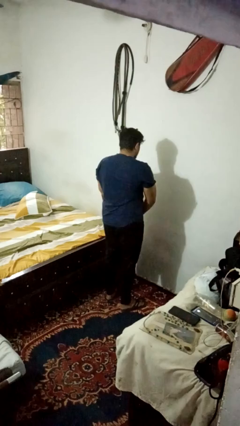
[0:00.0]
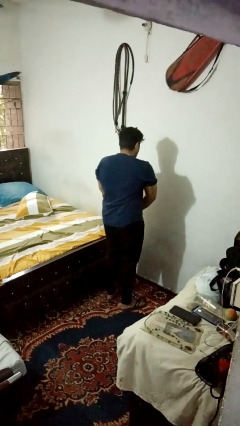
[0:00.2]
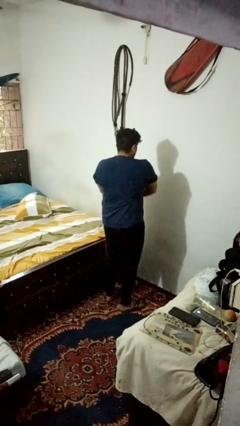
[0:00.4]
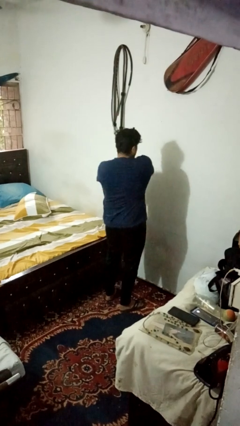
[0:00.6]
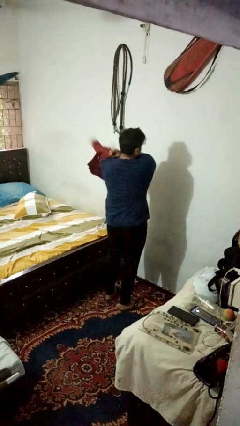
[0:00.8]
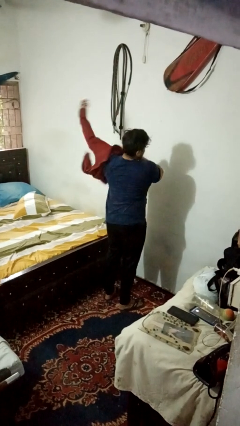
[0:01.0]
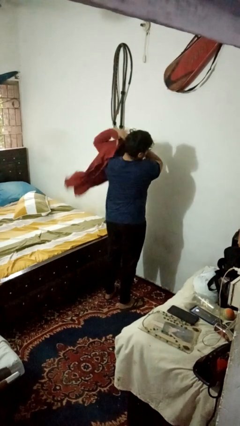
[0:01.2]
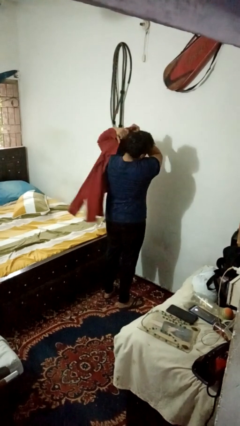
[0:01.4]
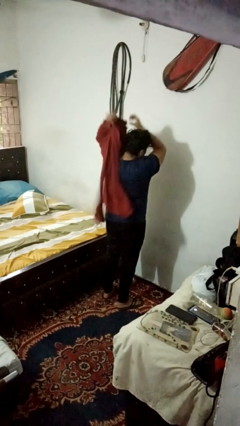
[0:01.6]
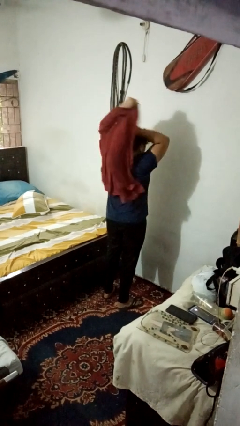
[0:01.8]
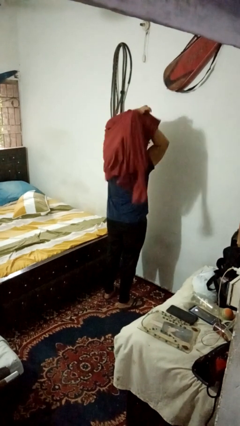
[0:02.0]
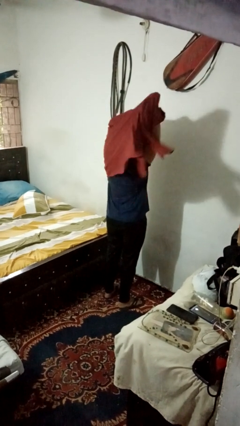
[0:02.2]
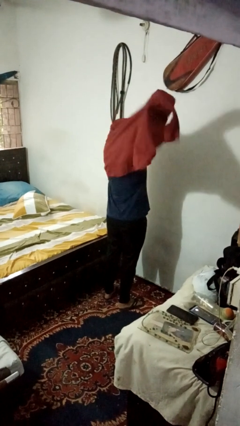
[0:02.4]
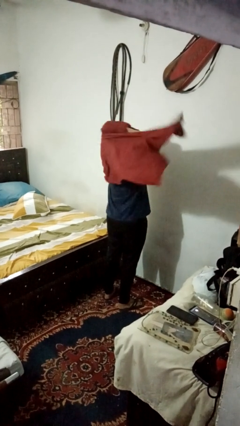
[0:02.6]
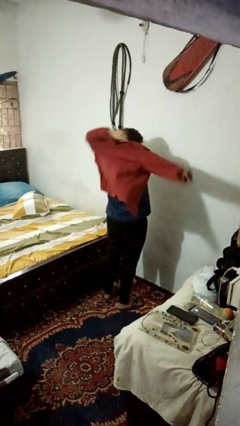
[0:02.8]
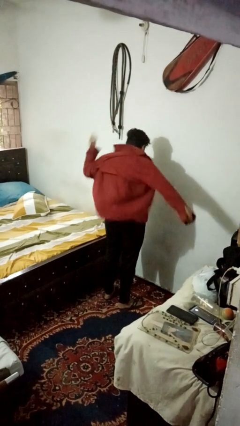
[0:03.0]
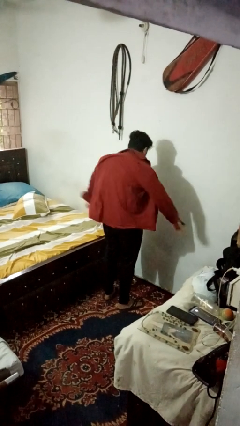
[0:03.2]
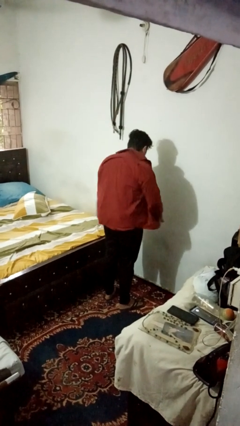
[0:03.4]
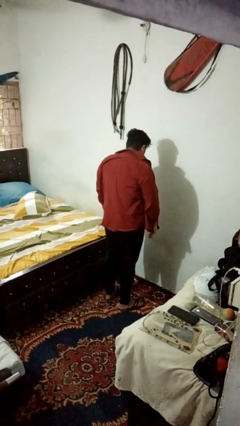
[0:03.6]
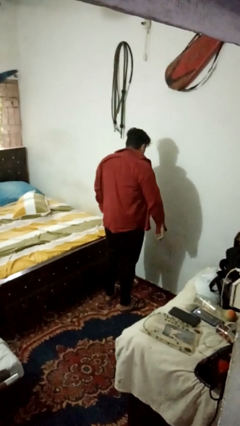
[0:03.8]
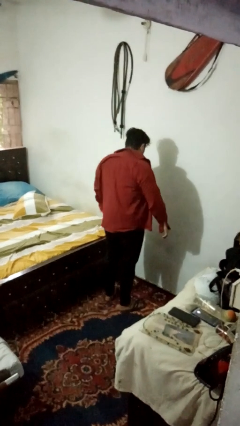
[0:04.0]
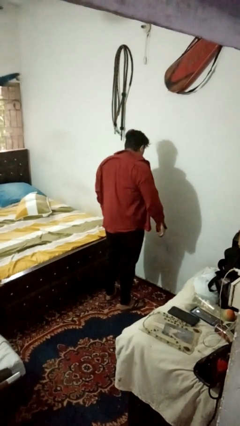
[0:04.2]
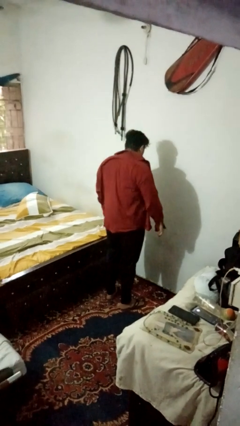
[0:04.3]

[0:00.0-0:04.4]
person puts on shirt

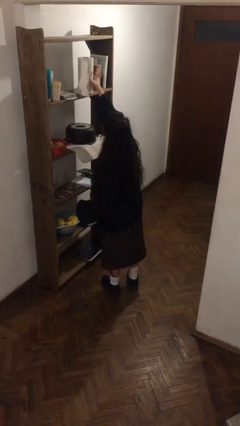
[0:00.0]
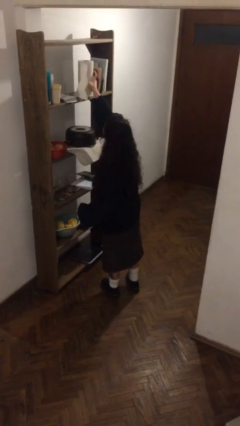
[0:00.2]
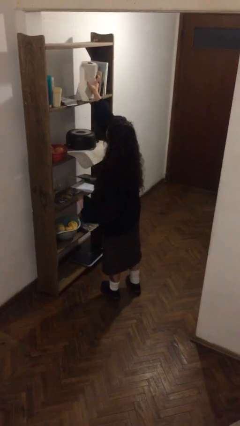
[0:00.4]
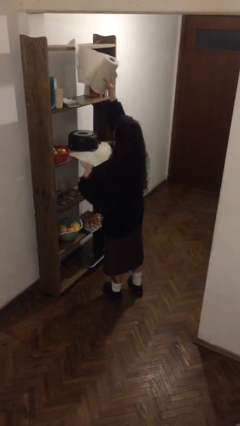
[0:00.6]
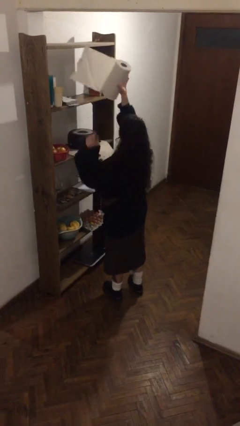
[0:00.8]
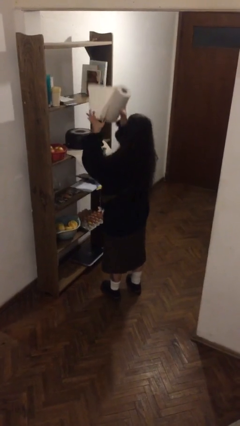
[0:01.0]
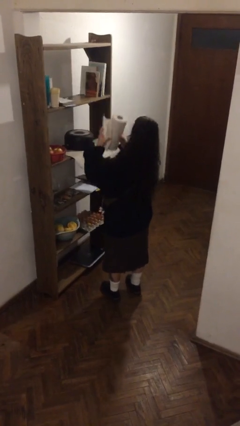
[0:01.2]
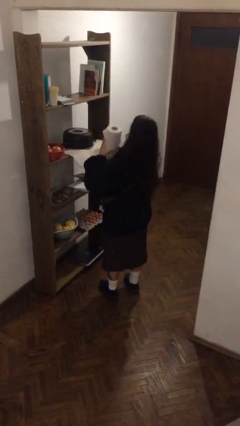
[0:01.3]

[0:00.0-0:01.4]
person picks up object from shelf

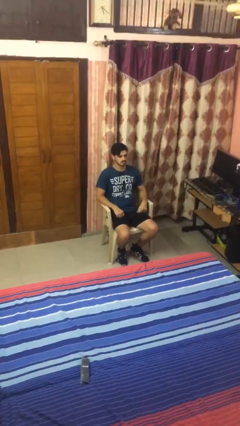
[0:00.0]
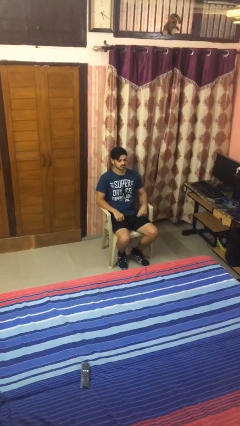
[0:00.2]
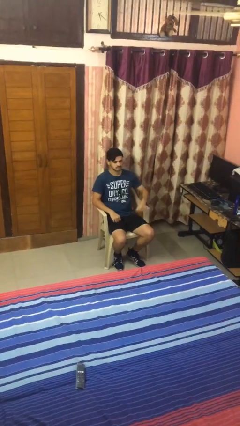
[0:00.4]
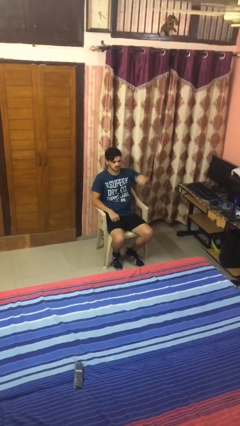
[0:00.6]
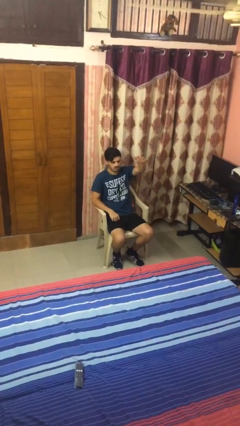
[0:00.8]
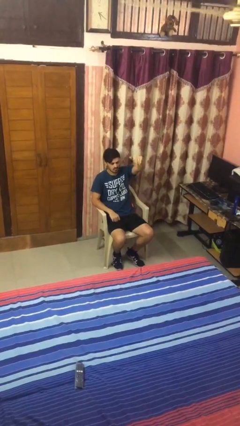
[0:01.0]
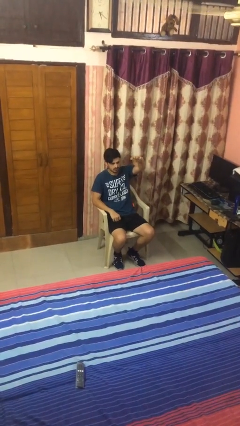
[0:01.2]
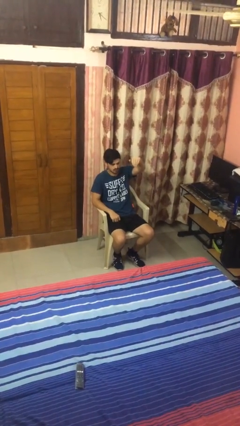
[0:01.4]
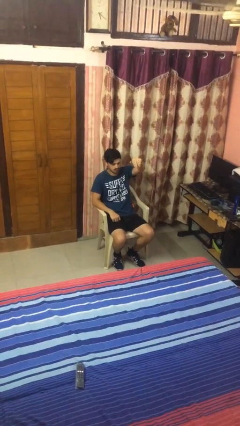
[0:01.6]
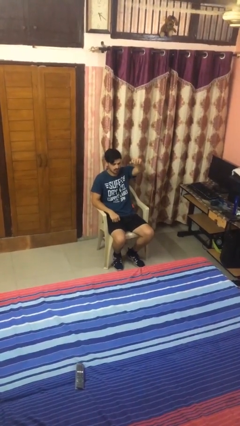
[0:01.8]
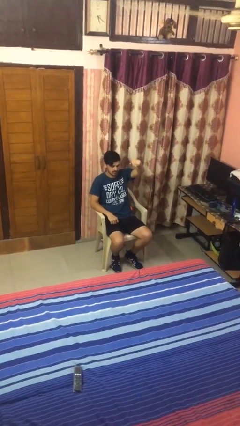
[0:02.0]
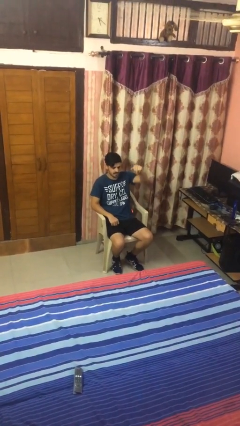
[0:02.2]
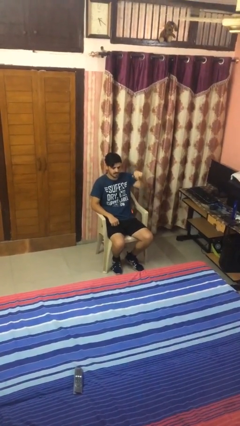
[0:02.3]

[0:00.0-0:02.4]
person gestures come here

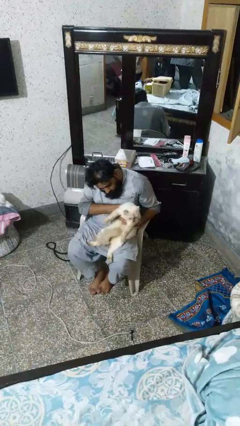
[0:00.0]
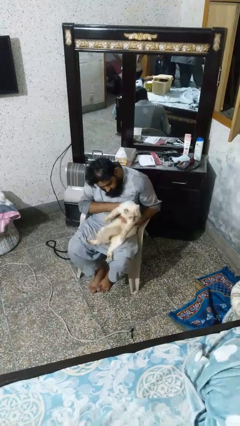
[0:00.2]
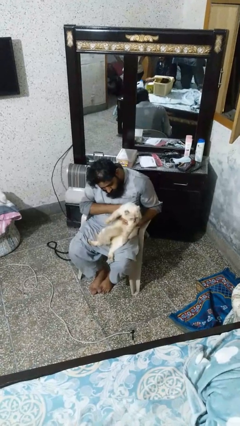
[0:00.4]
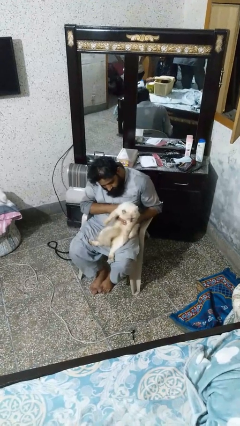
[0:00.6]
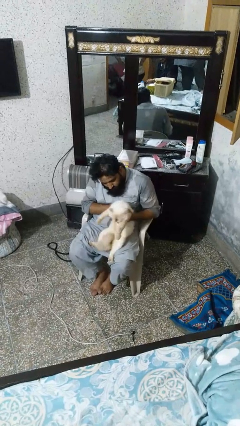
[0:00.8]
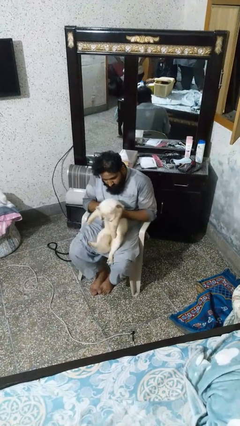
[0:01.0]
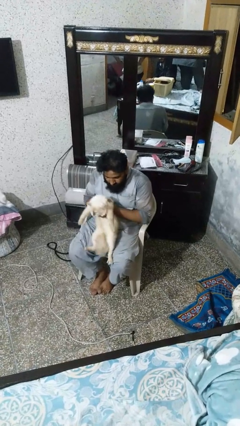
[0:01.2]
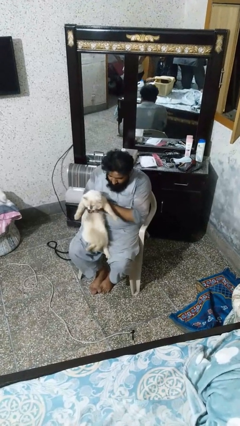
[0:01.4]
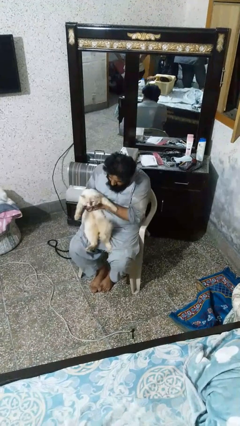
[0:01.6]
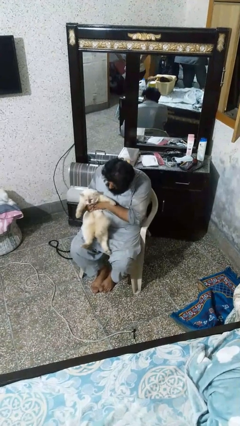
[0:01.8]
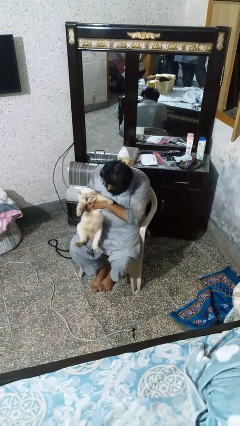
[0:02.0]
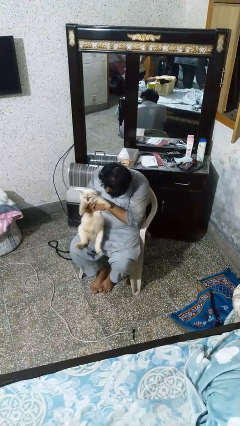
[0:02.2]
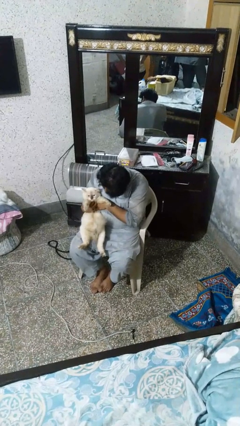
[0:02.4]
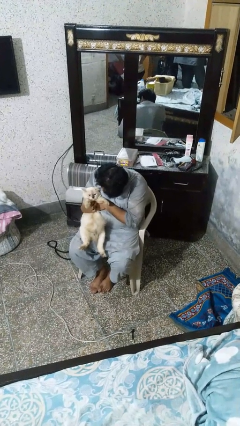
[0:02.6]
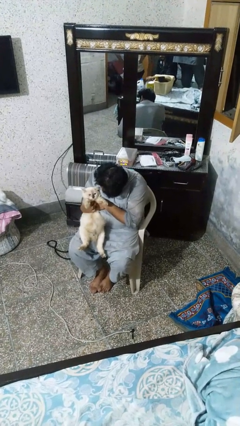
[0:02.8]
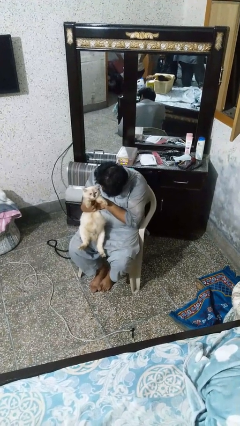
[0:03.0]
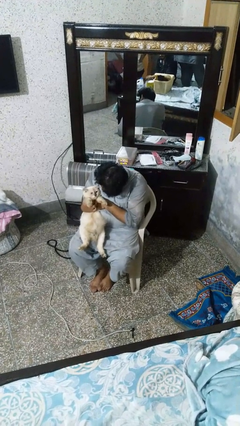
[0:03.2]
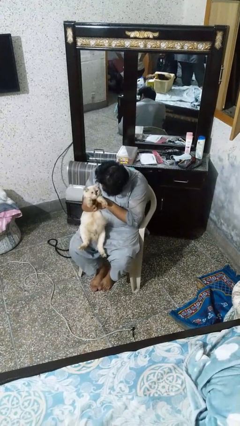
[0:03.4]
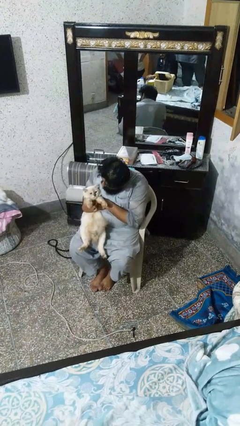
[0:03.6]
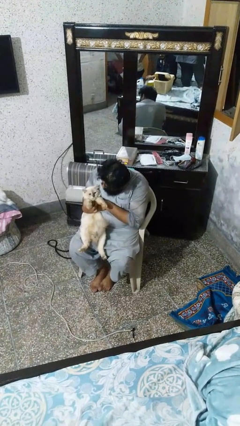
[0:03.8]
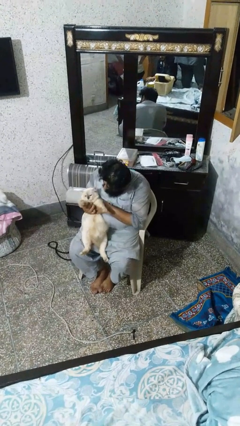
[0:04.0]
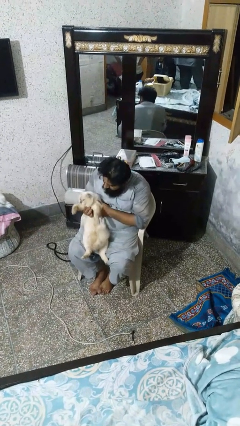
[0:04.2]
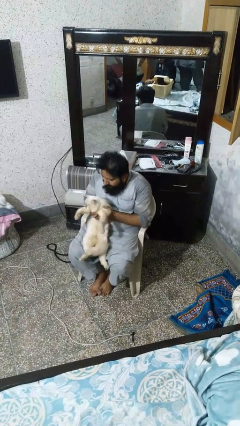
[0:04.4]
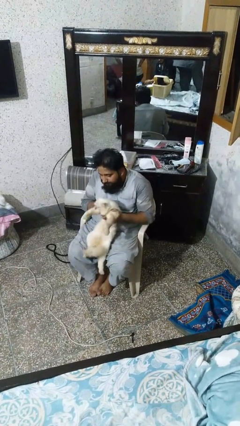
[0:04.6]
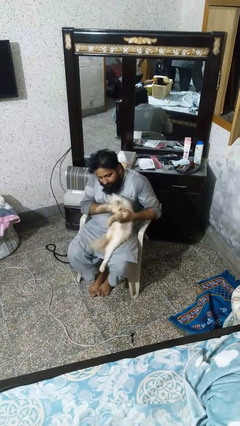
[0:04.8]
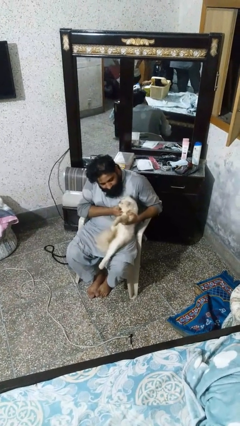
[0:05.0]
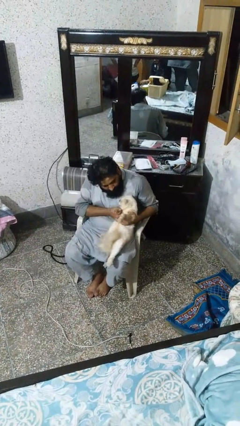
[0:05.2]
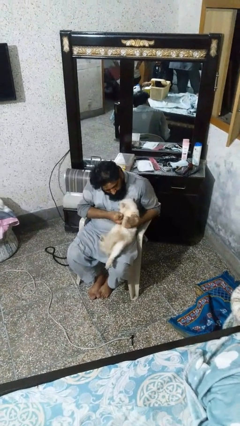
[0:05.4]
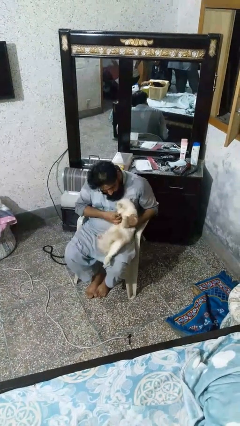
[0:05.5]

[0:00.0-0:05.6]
person pets cat

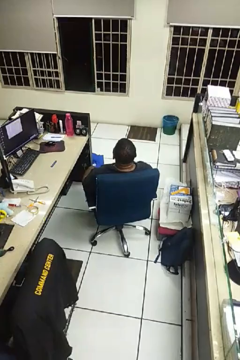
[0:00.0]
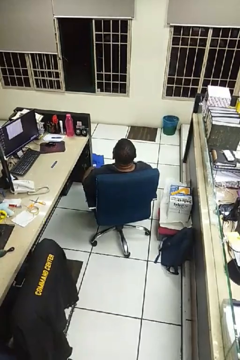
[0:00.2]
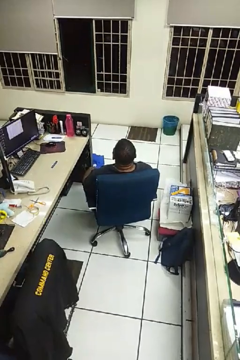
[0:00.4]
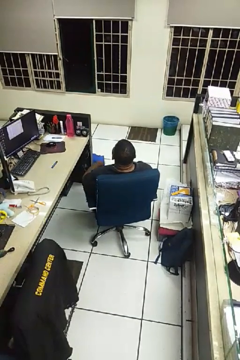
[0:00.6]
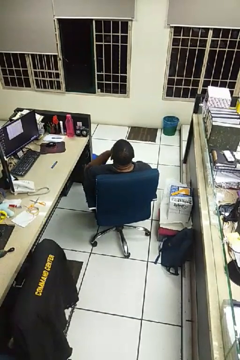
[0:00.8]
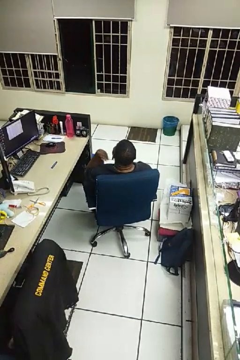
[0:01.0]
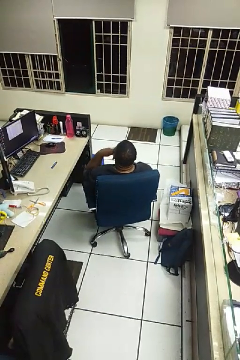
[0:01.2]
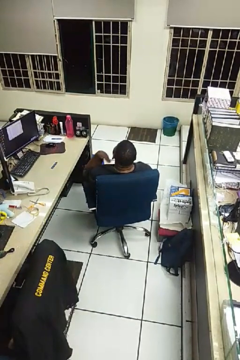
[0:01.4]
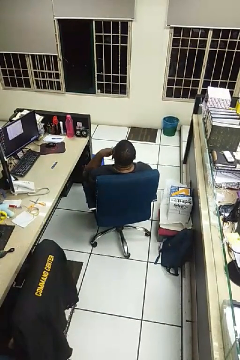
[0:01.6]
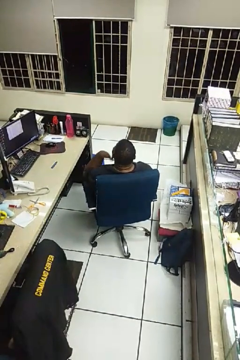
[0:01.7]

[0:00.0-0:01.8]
person gestures cut

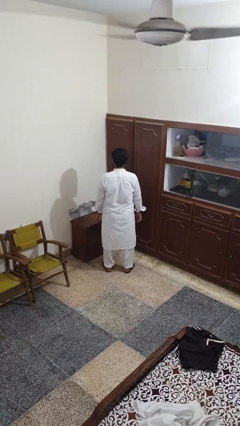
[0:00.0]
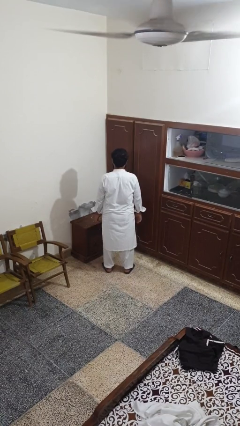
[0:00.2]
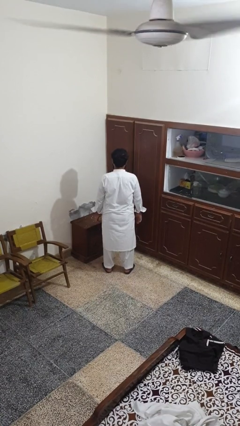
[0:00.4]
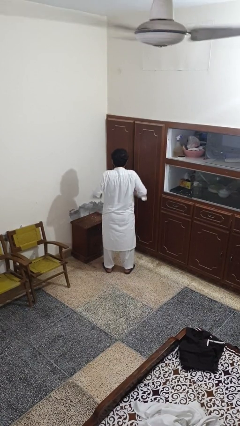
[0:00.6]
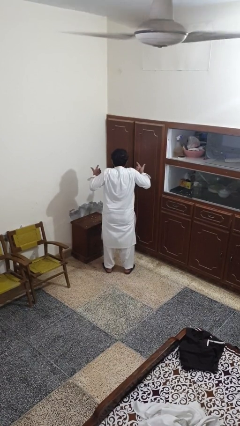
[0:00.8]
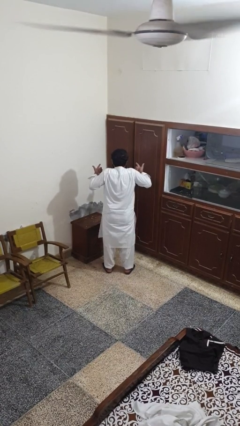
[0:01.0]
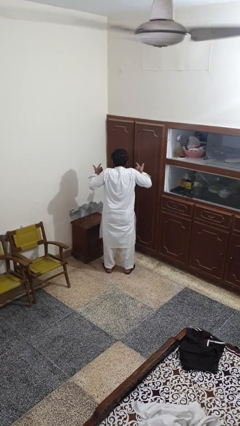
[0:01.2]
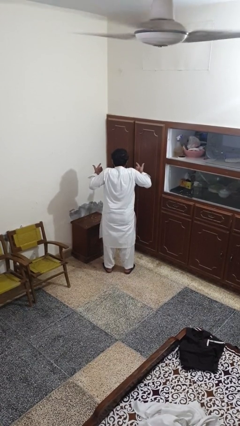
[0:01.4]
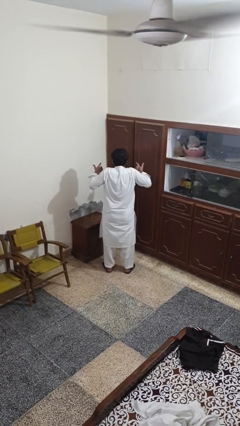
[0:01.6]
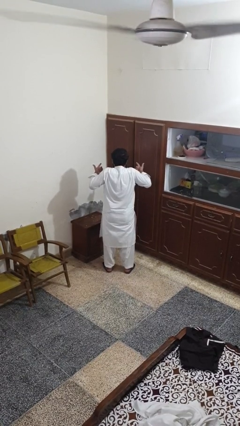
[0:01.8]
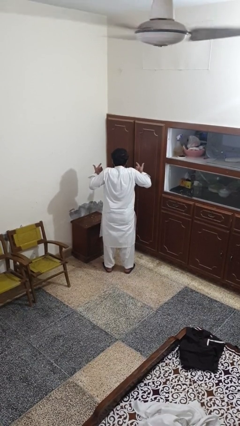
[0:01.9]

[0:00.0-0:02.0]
person shrugs

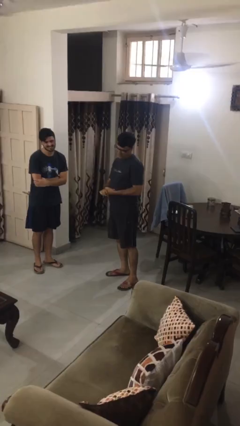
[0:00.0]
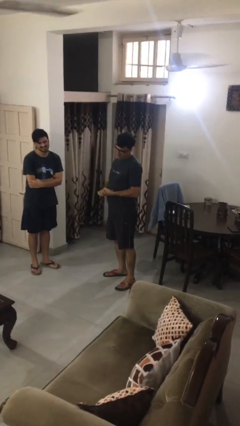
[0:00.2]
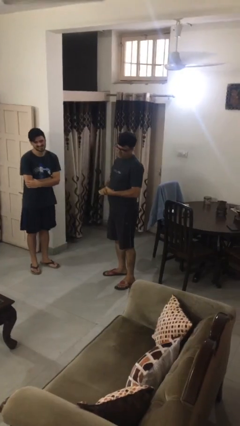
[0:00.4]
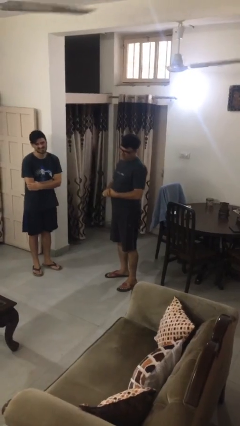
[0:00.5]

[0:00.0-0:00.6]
person laughs with person
